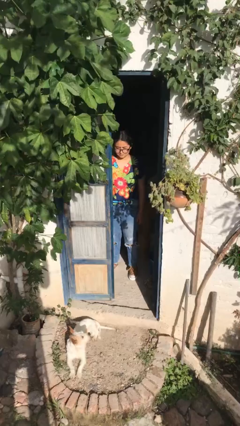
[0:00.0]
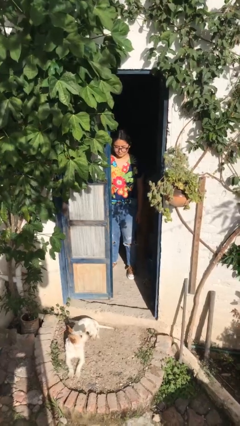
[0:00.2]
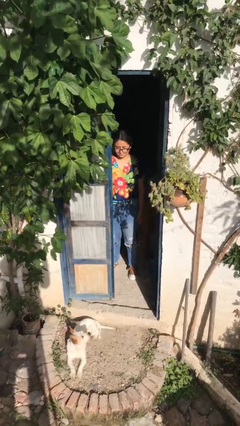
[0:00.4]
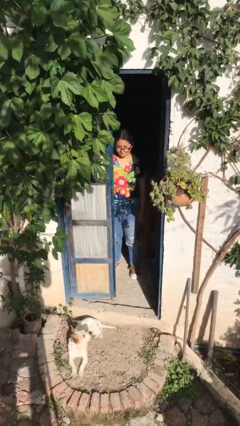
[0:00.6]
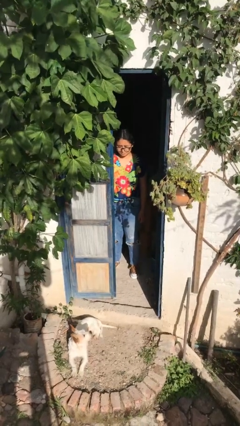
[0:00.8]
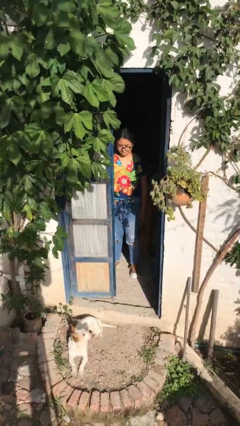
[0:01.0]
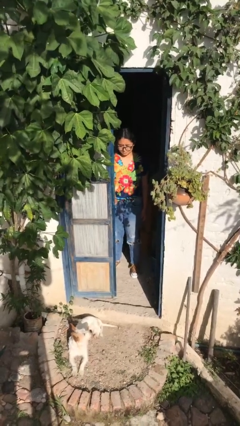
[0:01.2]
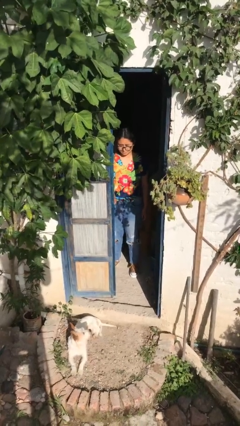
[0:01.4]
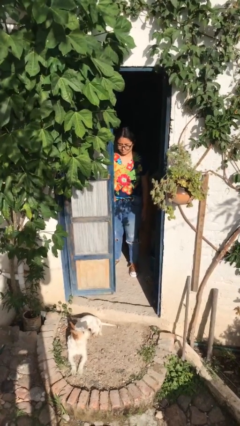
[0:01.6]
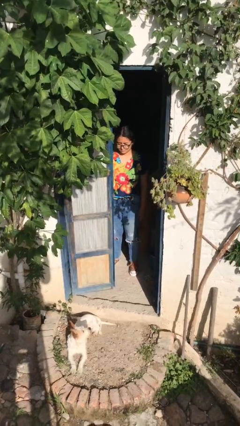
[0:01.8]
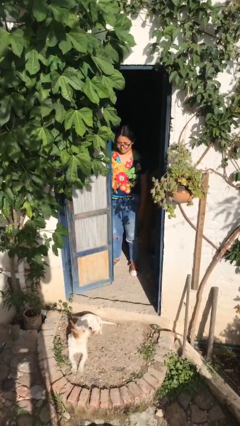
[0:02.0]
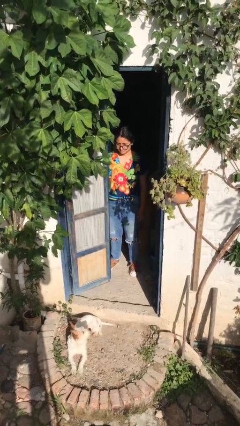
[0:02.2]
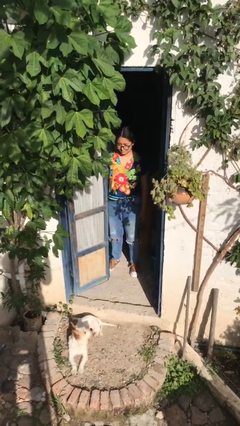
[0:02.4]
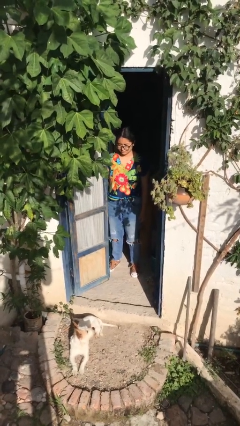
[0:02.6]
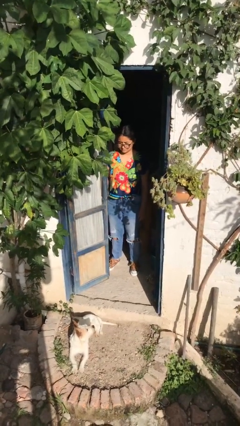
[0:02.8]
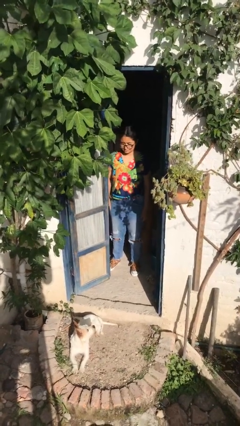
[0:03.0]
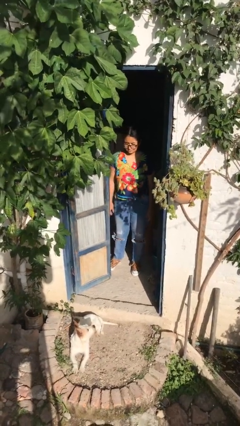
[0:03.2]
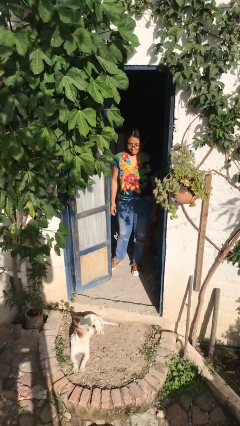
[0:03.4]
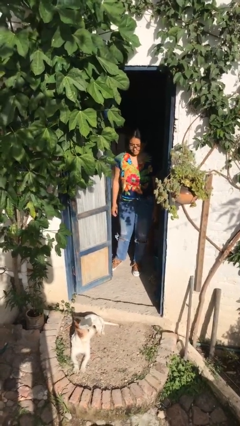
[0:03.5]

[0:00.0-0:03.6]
person opens facility door

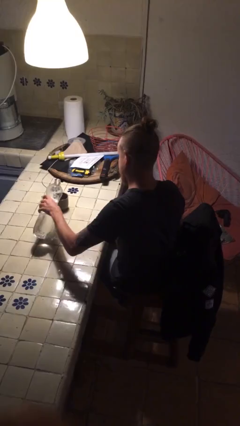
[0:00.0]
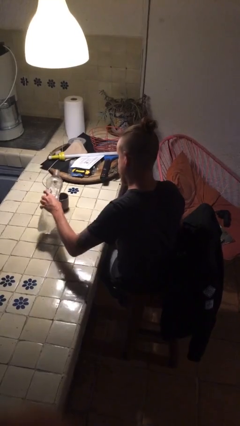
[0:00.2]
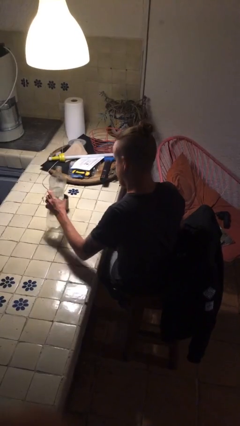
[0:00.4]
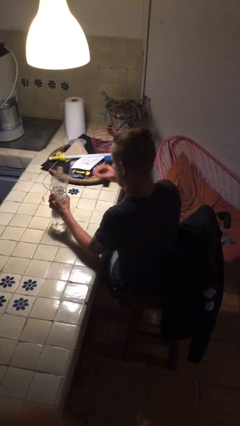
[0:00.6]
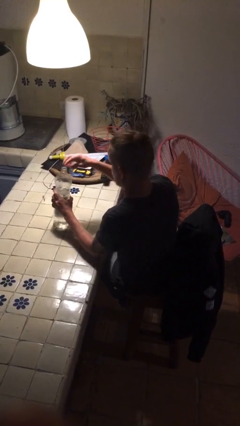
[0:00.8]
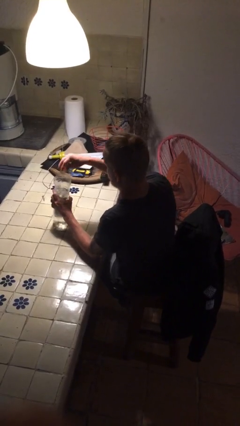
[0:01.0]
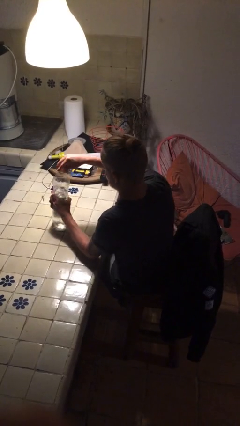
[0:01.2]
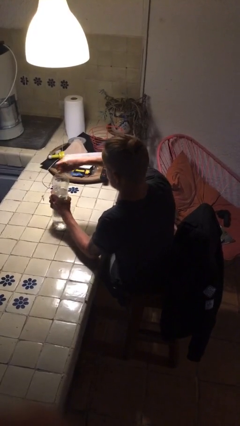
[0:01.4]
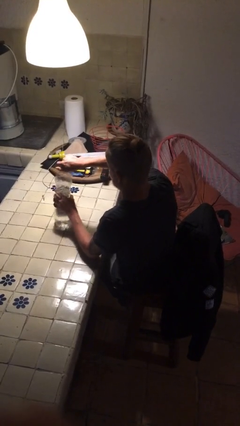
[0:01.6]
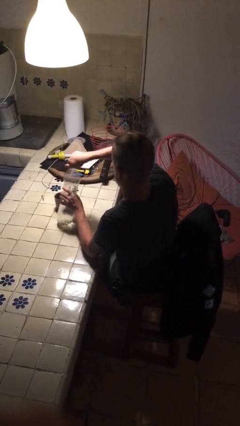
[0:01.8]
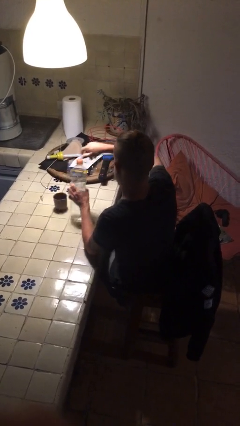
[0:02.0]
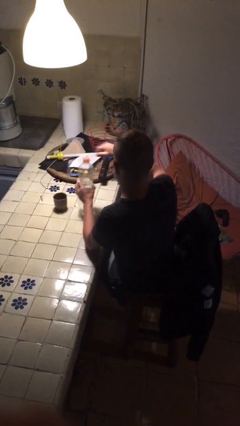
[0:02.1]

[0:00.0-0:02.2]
person screws lid to bottle

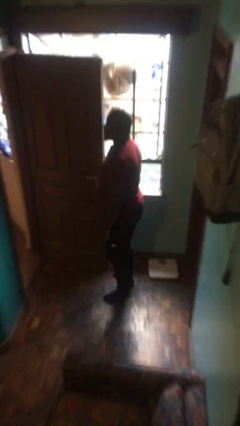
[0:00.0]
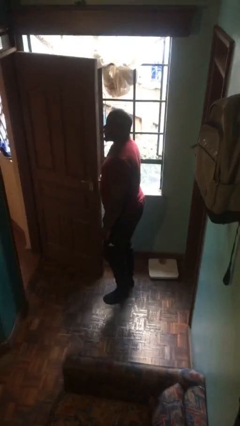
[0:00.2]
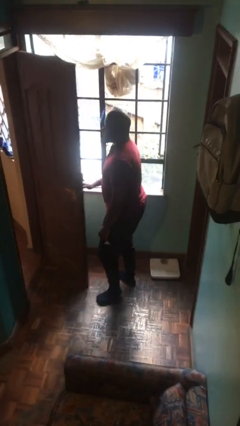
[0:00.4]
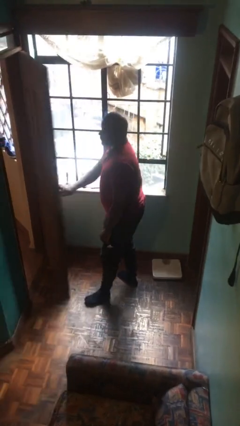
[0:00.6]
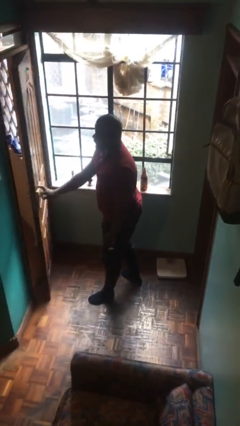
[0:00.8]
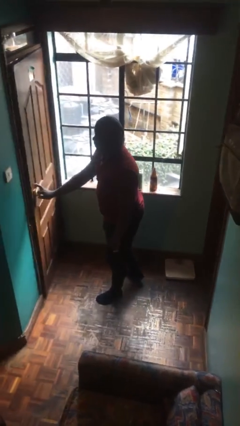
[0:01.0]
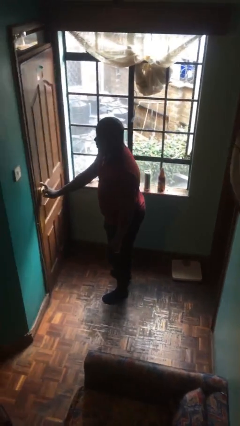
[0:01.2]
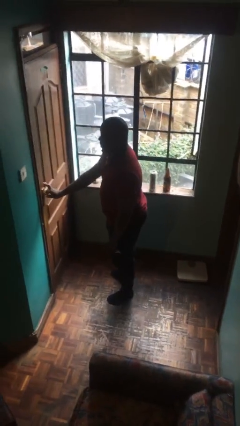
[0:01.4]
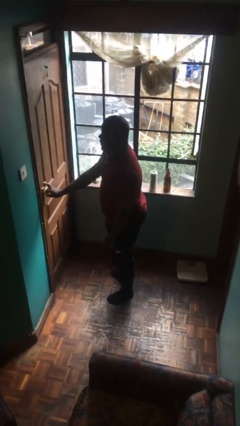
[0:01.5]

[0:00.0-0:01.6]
person closes facility door

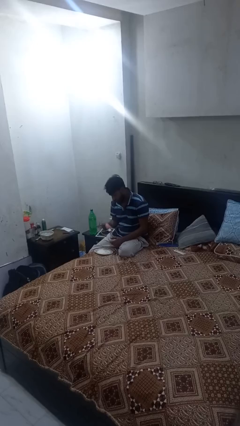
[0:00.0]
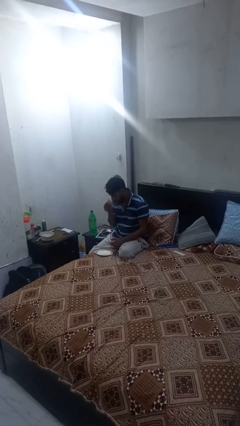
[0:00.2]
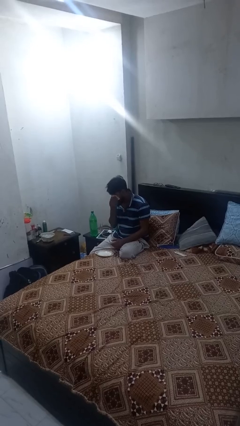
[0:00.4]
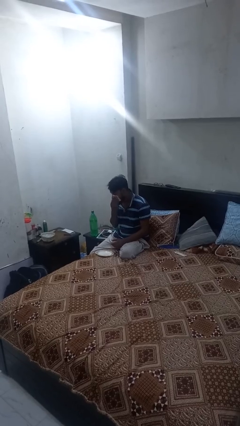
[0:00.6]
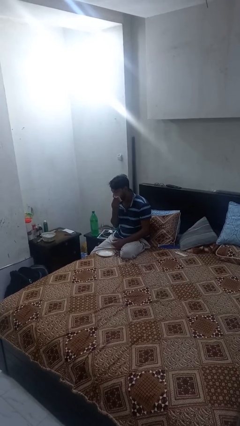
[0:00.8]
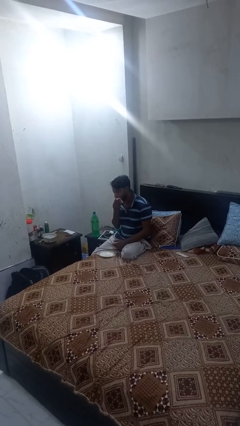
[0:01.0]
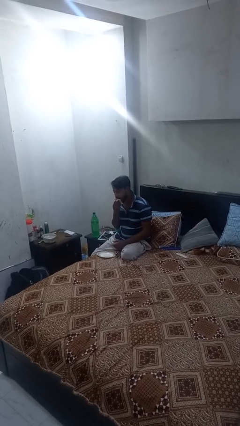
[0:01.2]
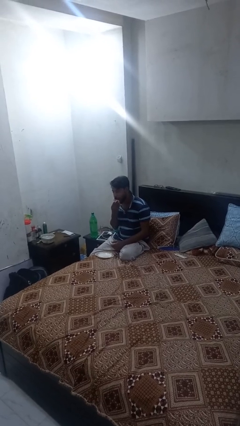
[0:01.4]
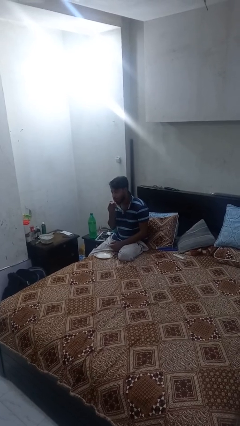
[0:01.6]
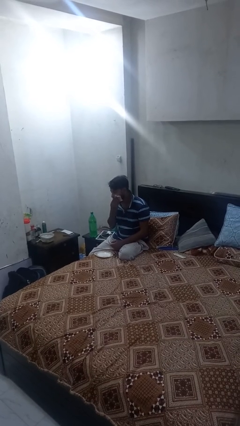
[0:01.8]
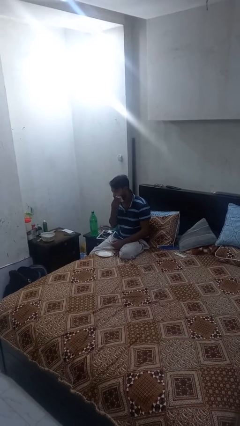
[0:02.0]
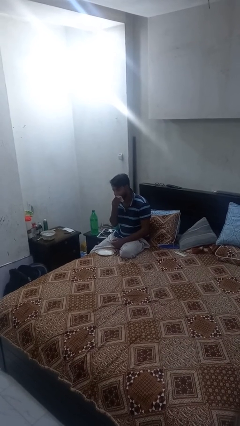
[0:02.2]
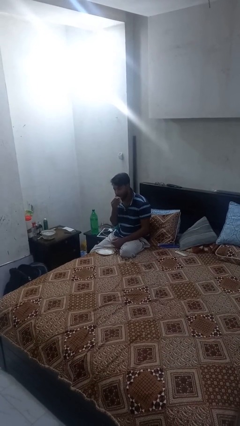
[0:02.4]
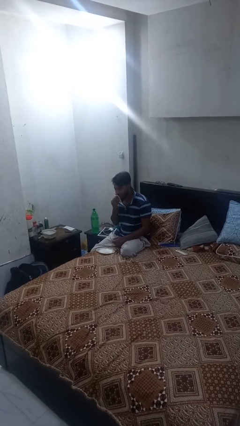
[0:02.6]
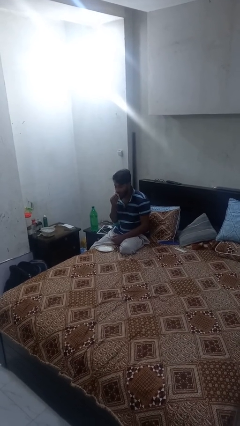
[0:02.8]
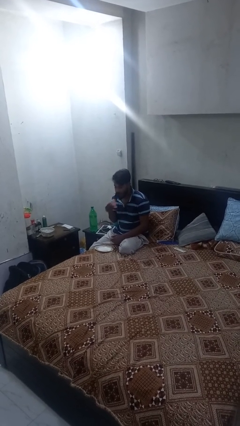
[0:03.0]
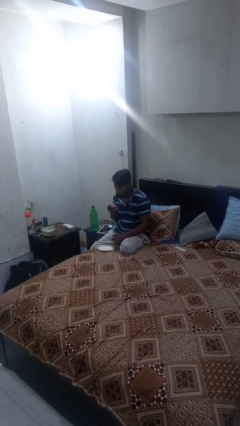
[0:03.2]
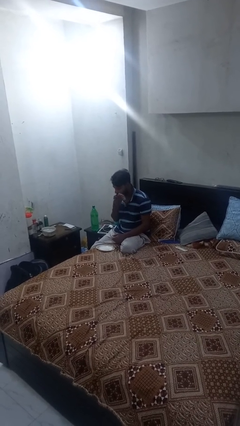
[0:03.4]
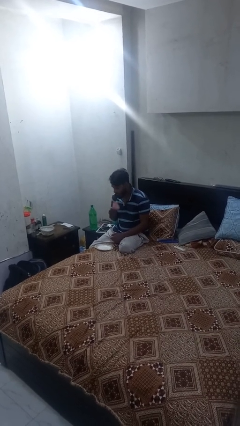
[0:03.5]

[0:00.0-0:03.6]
person wipes mouth with napkin

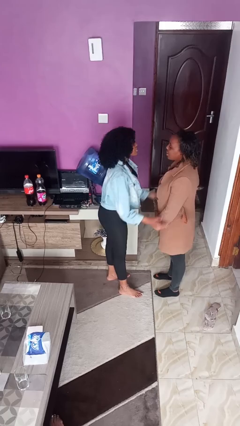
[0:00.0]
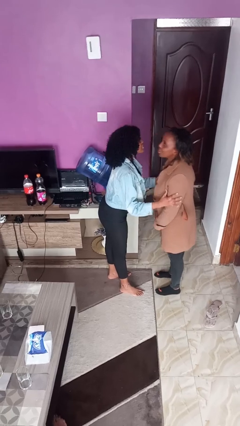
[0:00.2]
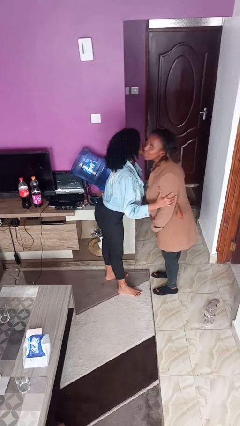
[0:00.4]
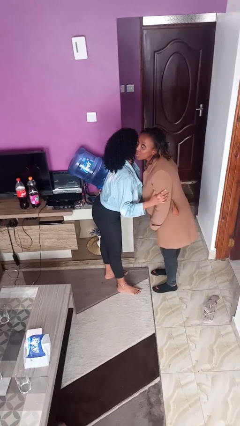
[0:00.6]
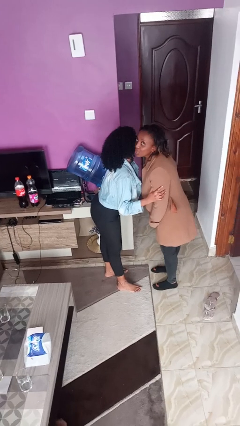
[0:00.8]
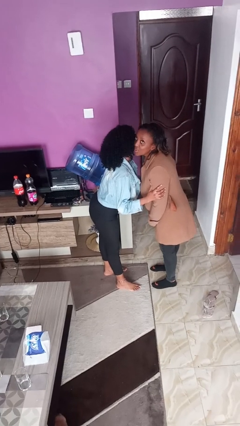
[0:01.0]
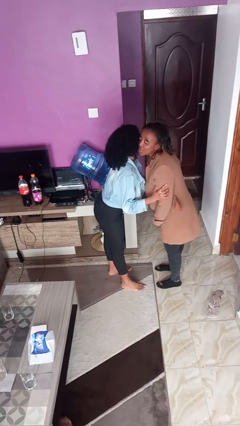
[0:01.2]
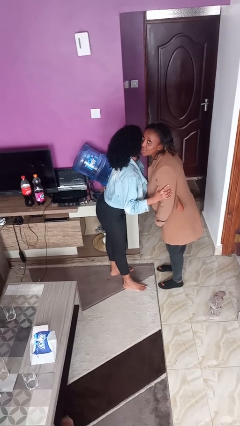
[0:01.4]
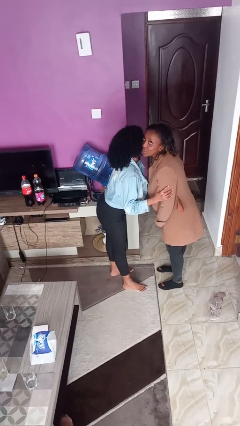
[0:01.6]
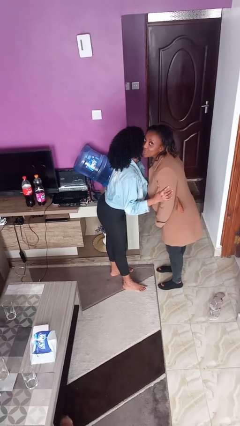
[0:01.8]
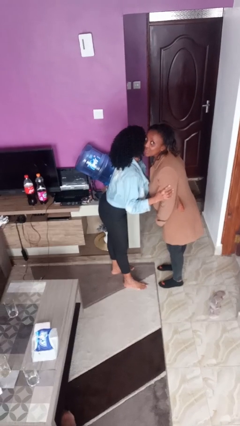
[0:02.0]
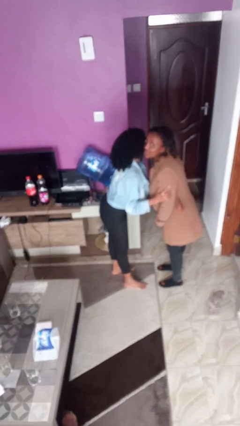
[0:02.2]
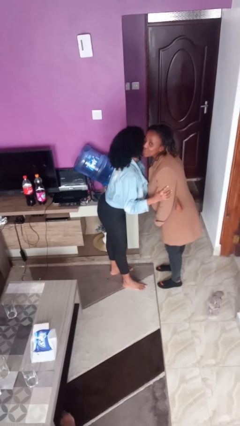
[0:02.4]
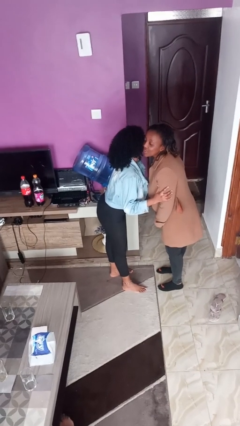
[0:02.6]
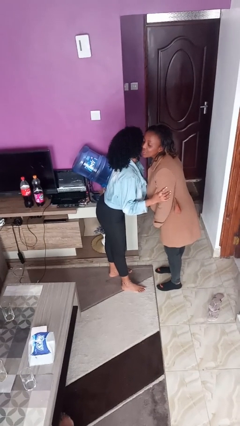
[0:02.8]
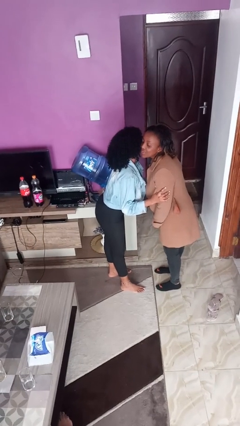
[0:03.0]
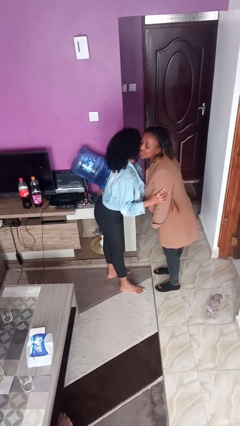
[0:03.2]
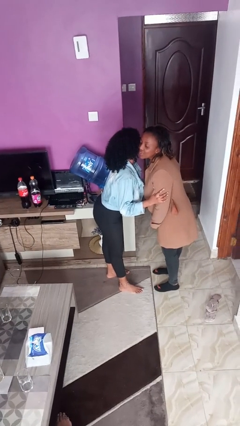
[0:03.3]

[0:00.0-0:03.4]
person kisses cheek of person

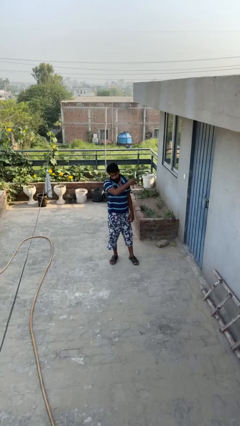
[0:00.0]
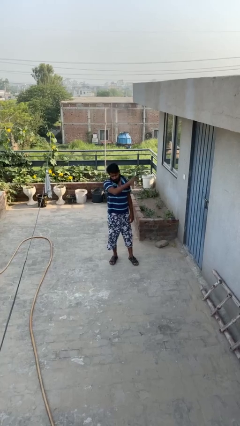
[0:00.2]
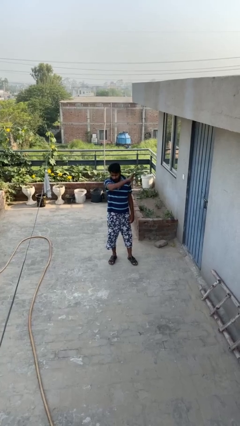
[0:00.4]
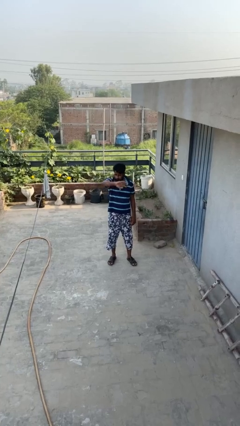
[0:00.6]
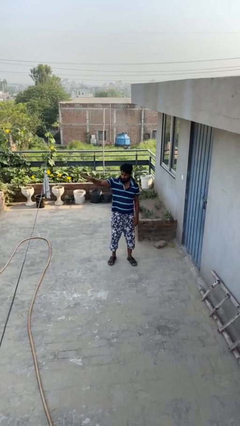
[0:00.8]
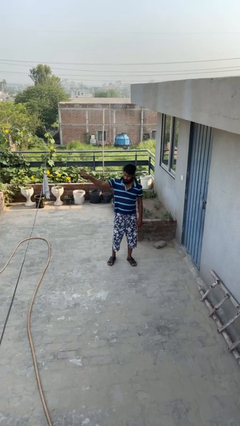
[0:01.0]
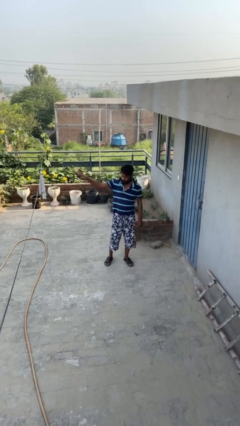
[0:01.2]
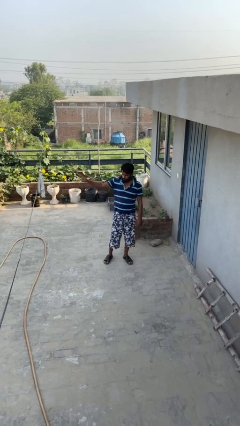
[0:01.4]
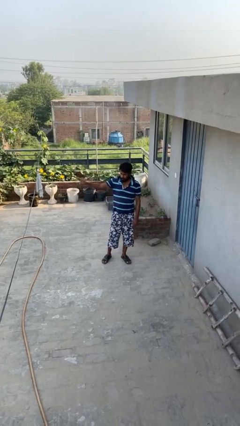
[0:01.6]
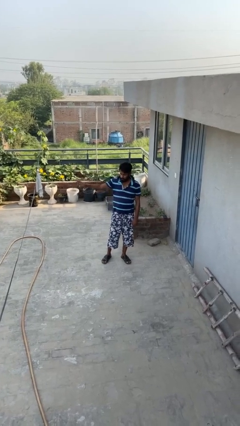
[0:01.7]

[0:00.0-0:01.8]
person gestures swipe right

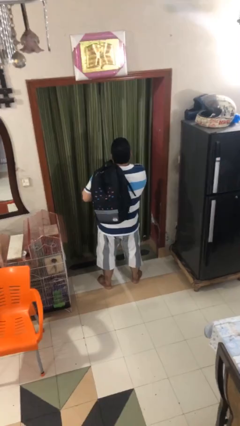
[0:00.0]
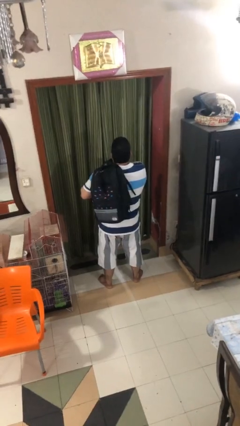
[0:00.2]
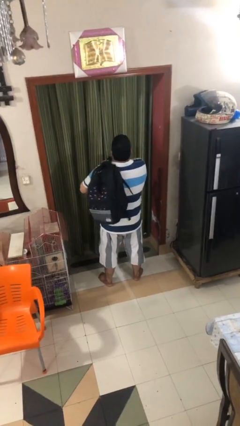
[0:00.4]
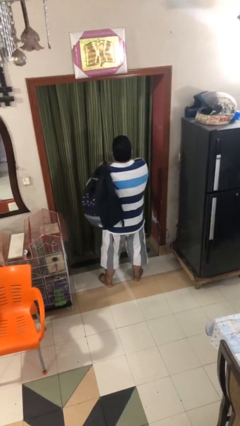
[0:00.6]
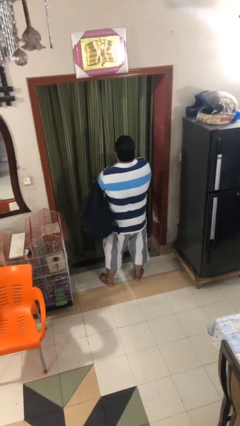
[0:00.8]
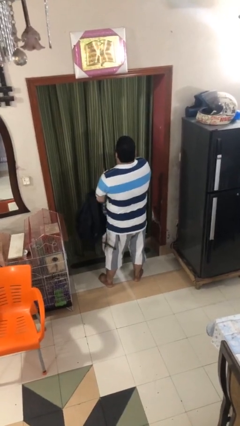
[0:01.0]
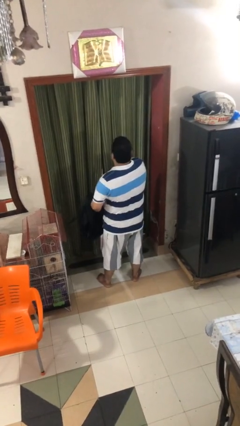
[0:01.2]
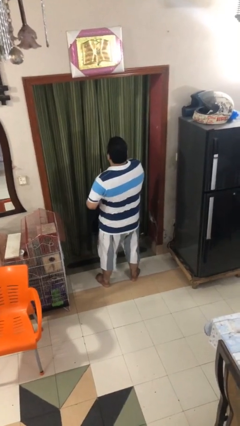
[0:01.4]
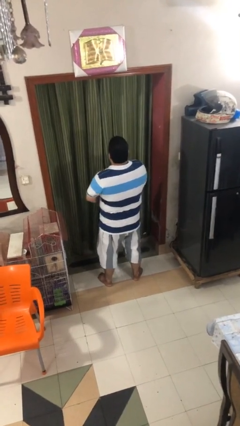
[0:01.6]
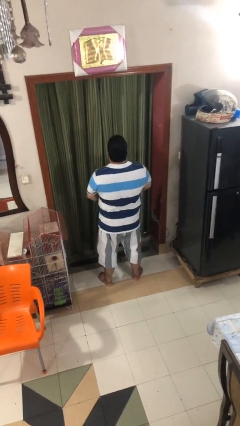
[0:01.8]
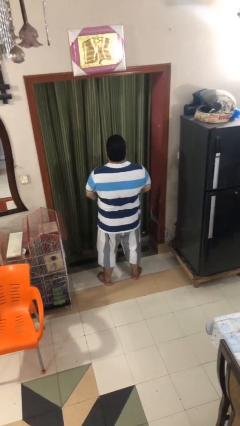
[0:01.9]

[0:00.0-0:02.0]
person takes off backpack
